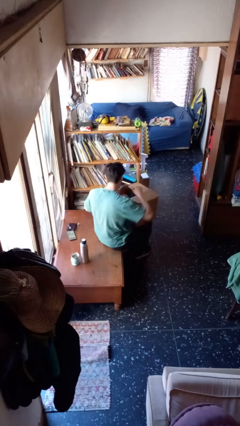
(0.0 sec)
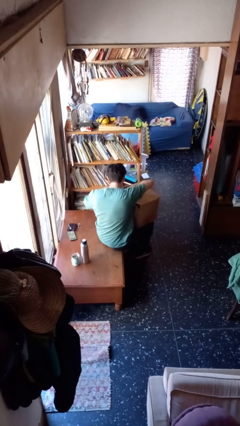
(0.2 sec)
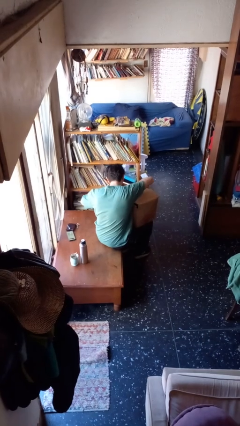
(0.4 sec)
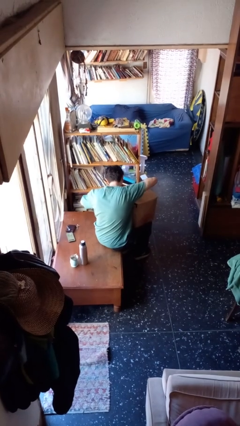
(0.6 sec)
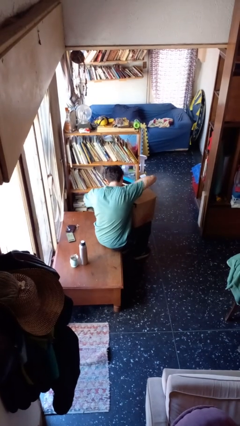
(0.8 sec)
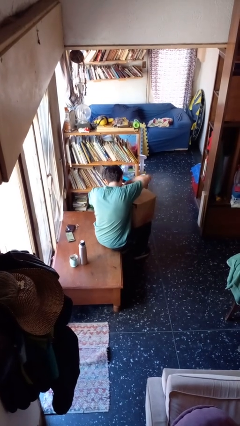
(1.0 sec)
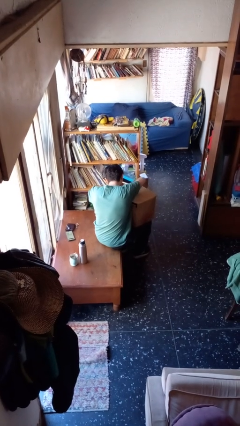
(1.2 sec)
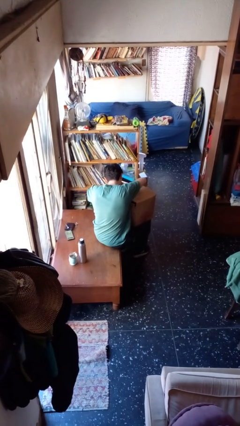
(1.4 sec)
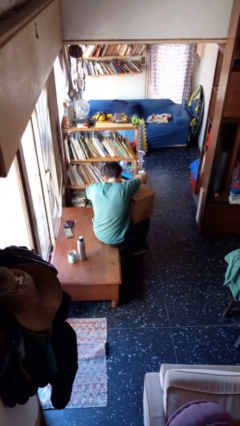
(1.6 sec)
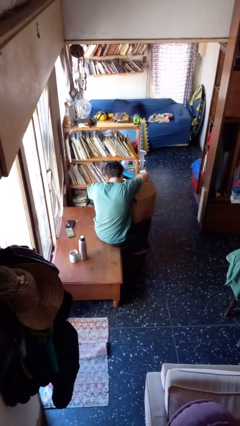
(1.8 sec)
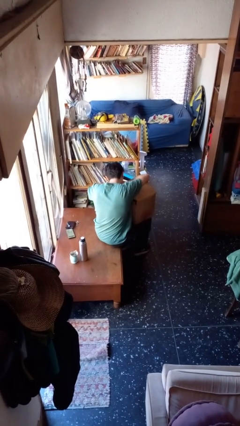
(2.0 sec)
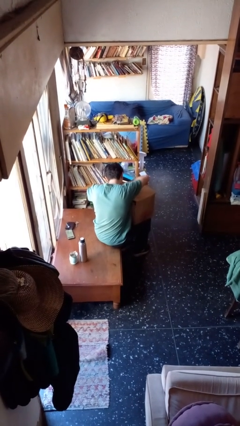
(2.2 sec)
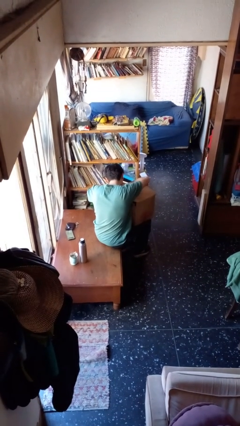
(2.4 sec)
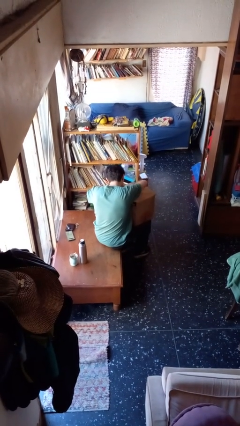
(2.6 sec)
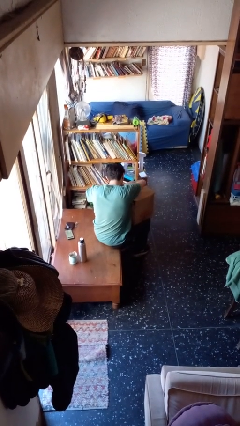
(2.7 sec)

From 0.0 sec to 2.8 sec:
person searches in box

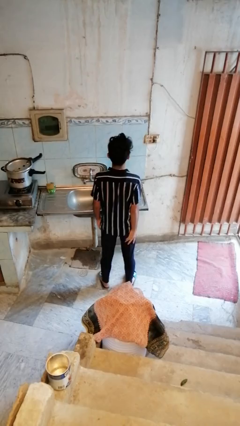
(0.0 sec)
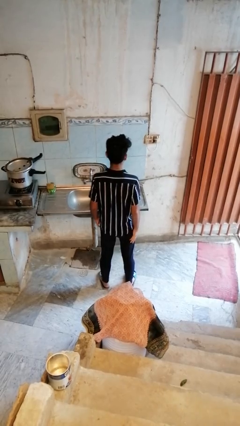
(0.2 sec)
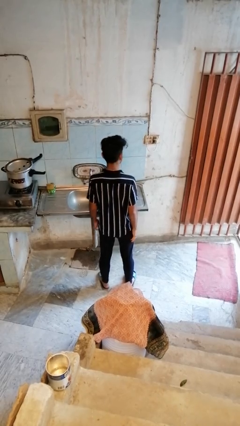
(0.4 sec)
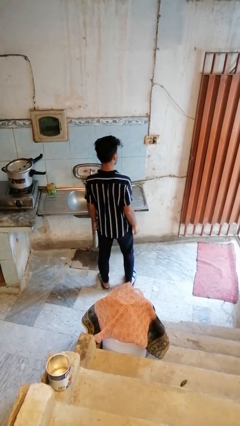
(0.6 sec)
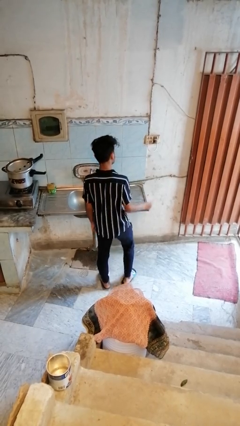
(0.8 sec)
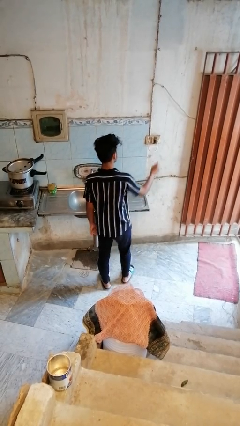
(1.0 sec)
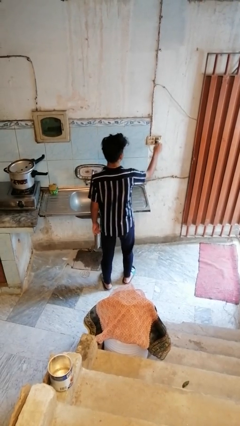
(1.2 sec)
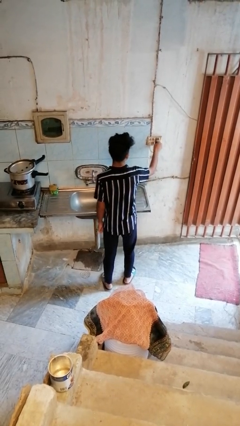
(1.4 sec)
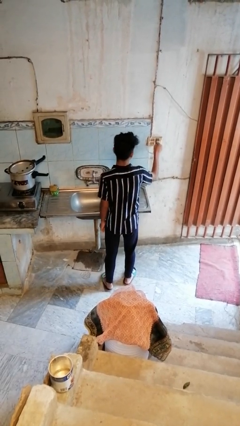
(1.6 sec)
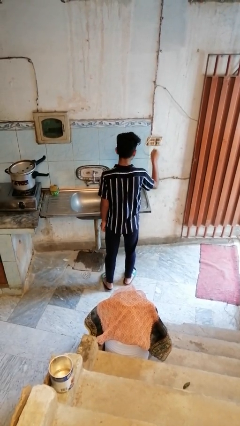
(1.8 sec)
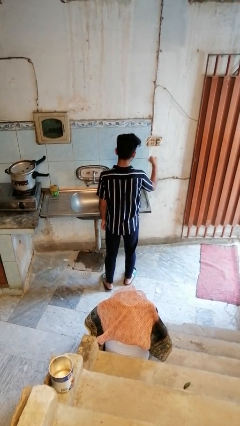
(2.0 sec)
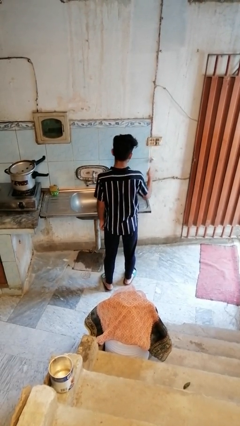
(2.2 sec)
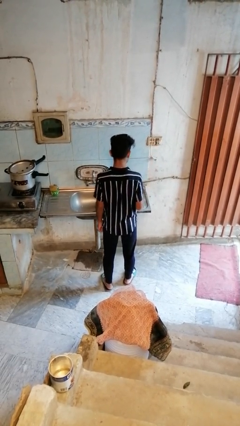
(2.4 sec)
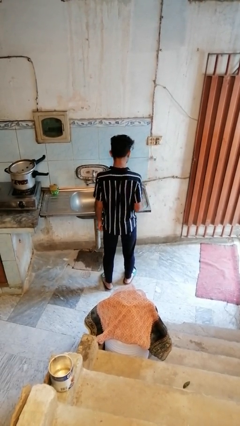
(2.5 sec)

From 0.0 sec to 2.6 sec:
person unplugs from electrical socket

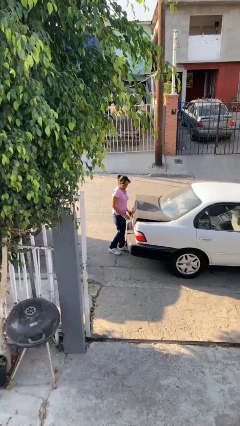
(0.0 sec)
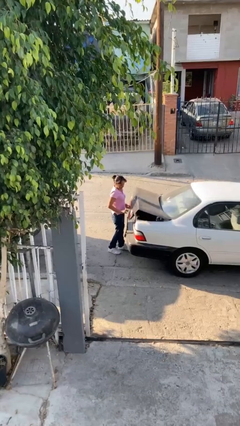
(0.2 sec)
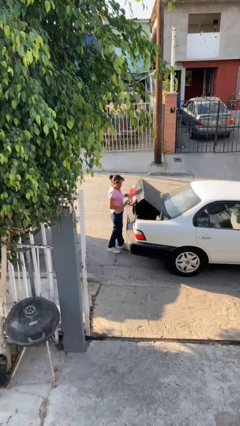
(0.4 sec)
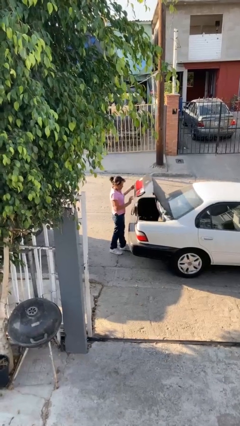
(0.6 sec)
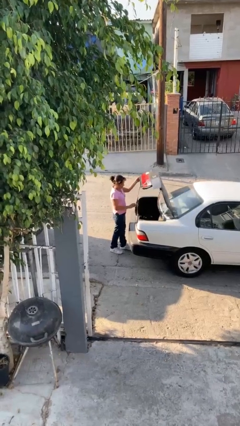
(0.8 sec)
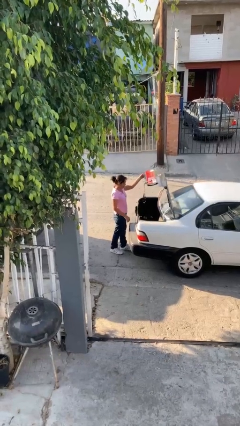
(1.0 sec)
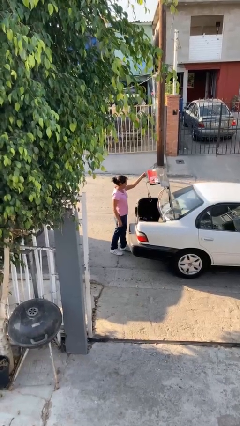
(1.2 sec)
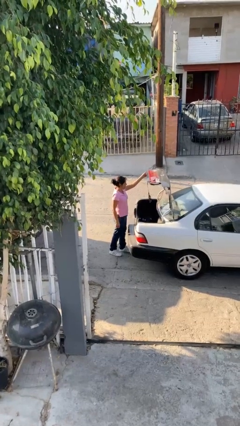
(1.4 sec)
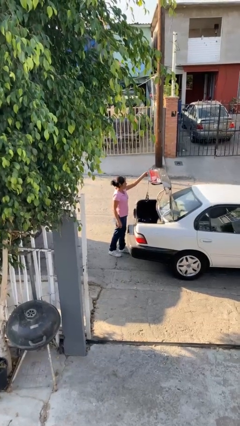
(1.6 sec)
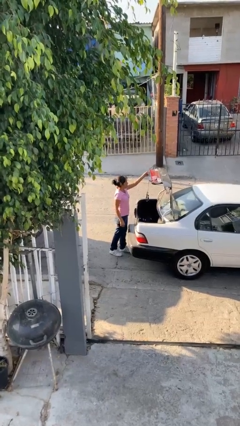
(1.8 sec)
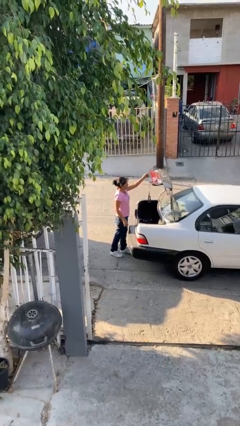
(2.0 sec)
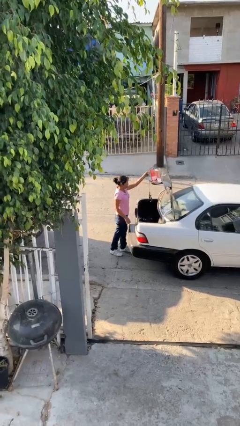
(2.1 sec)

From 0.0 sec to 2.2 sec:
person opens car trunk

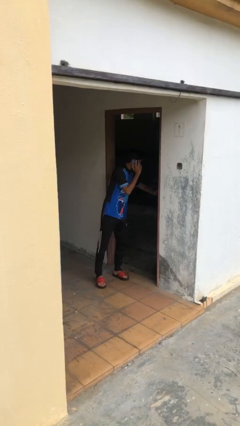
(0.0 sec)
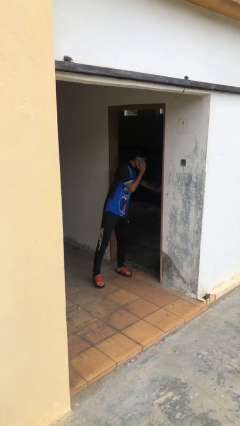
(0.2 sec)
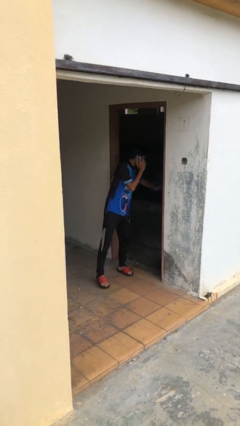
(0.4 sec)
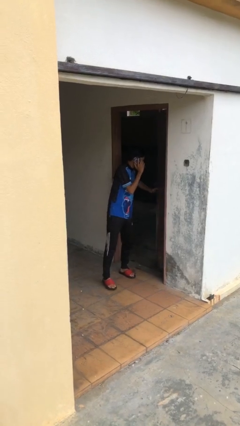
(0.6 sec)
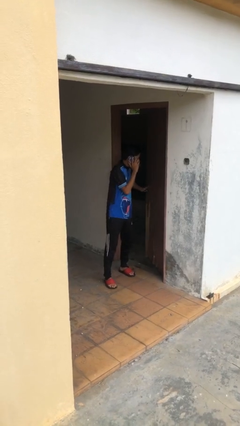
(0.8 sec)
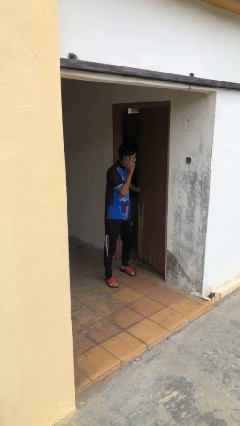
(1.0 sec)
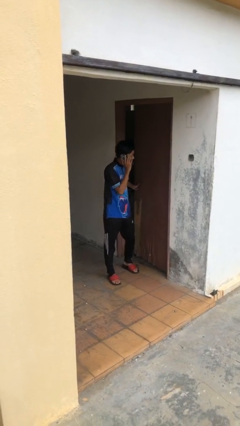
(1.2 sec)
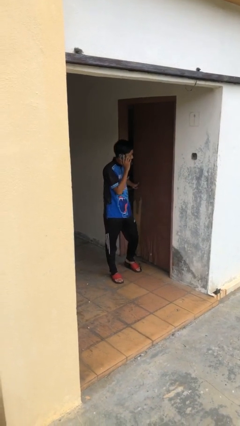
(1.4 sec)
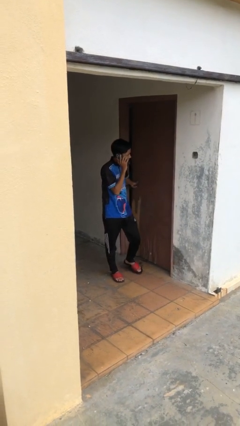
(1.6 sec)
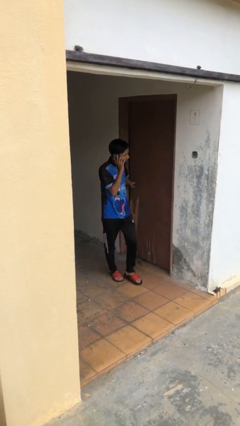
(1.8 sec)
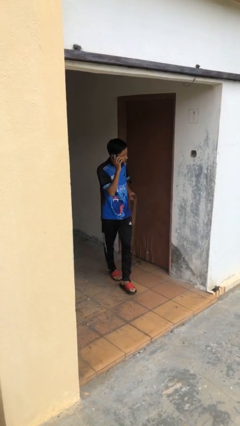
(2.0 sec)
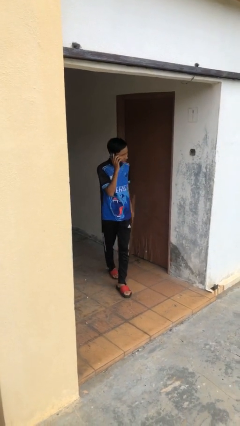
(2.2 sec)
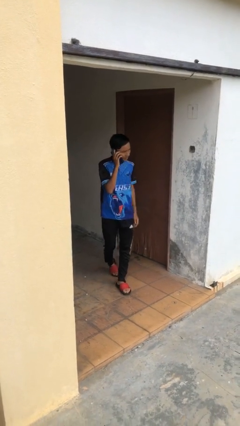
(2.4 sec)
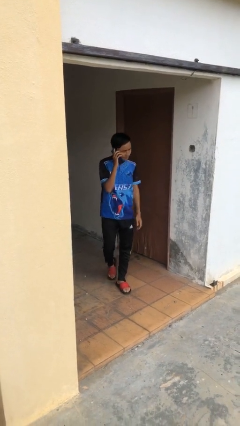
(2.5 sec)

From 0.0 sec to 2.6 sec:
person closes facility door

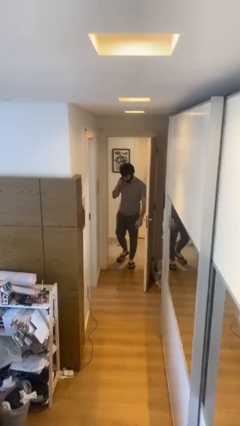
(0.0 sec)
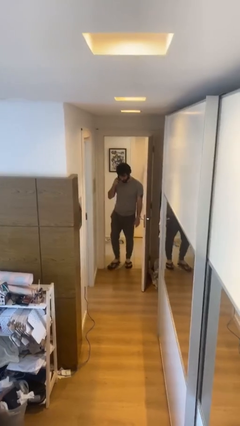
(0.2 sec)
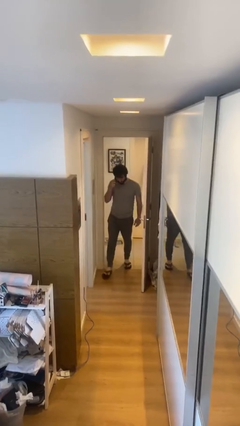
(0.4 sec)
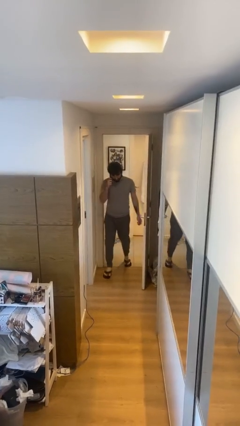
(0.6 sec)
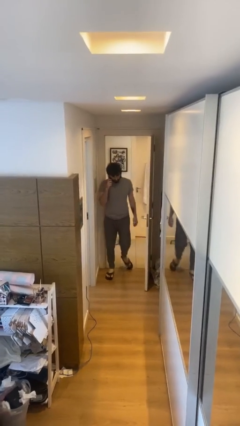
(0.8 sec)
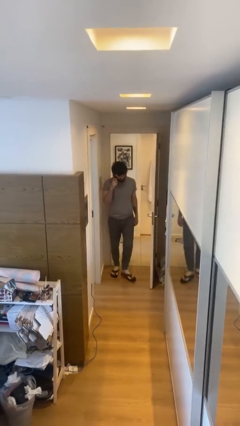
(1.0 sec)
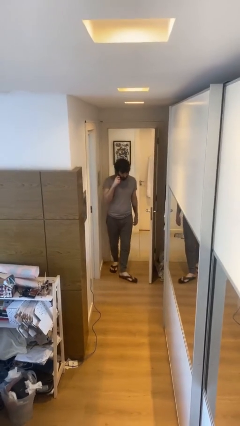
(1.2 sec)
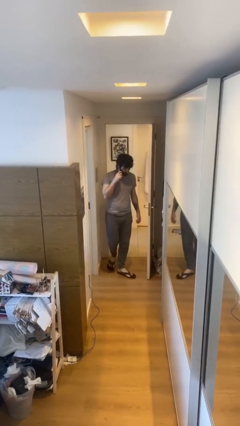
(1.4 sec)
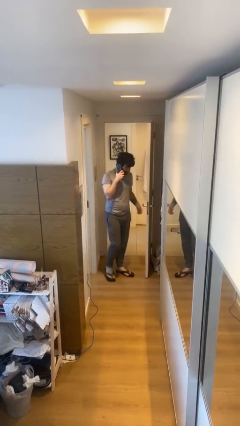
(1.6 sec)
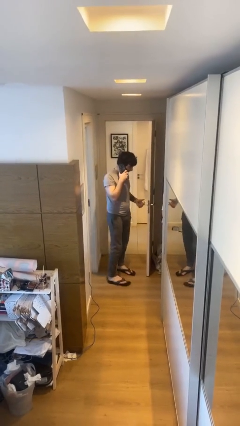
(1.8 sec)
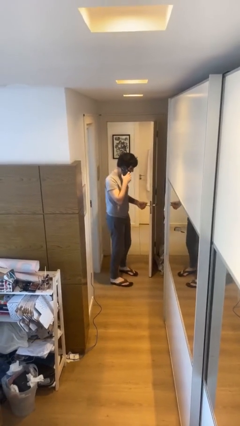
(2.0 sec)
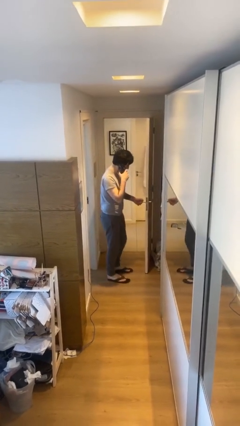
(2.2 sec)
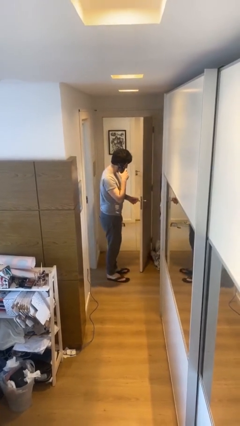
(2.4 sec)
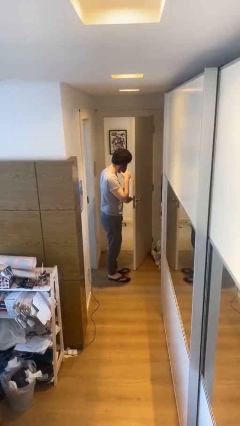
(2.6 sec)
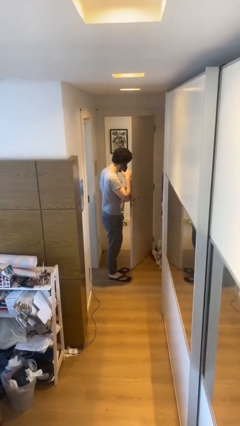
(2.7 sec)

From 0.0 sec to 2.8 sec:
person enters scene through structure

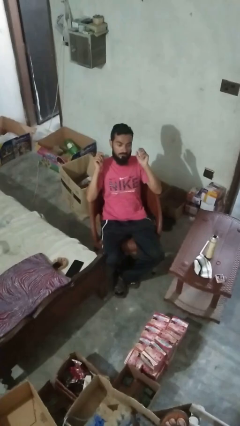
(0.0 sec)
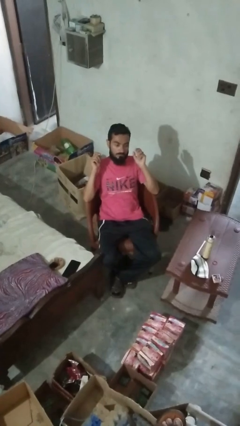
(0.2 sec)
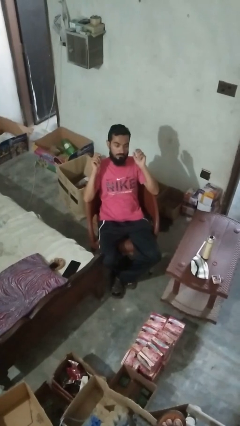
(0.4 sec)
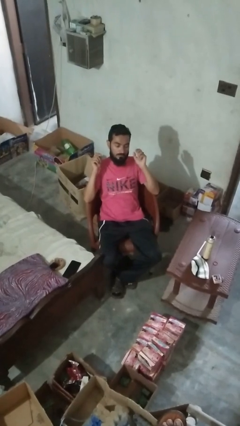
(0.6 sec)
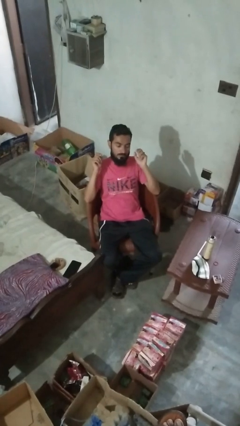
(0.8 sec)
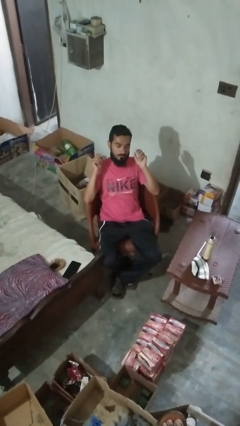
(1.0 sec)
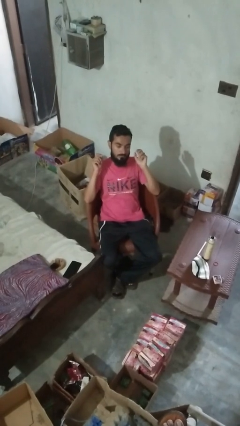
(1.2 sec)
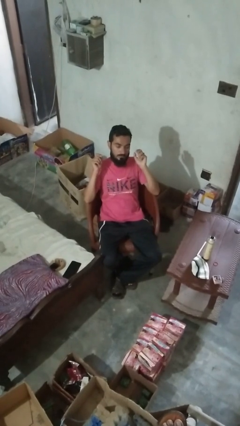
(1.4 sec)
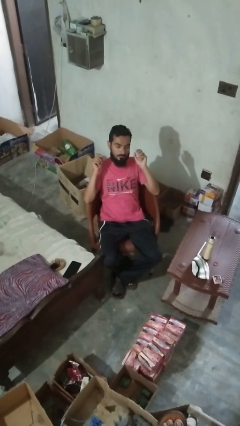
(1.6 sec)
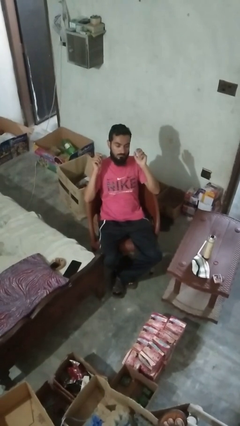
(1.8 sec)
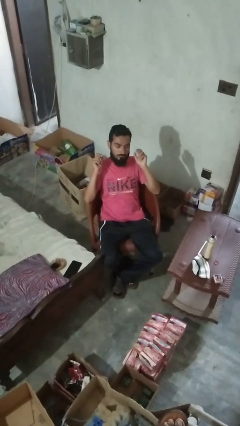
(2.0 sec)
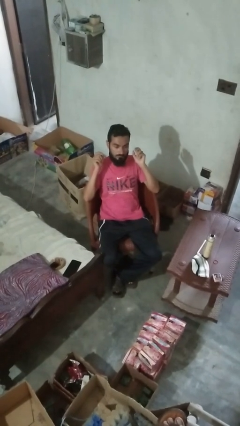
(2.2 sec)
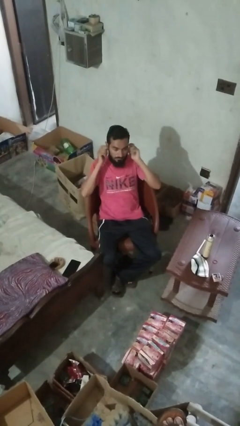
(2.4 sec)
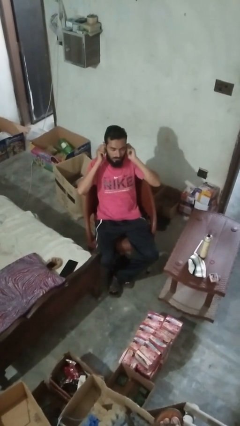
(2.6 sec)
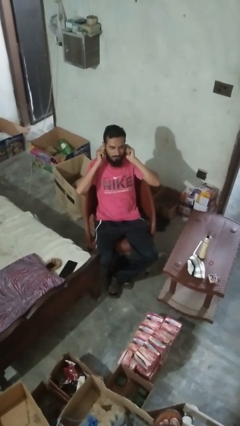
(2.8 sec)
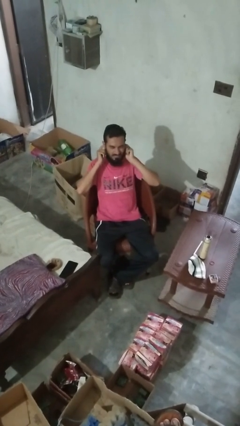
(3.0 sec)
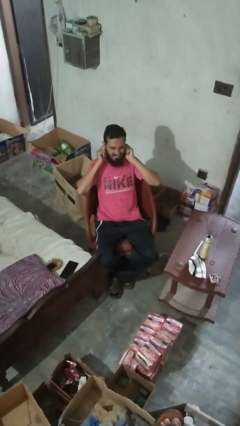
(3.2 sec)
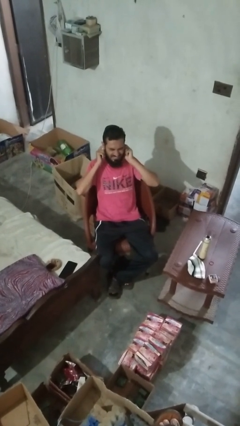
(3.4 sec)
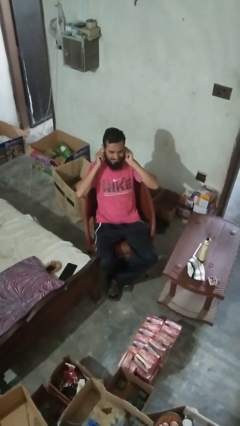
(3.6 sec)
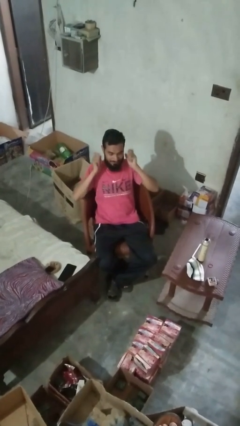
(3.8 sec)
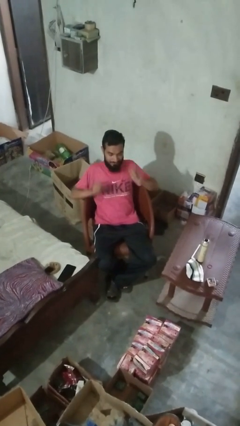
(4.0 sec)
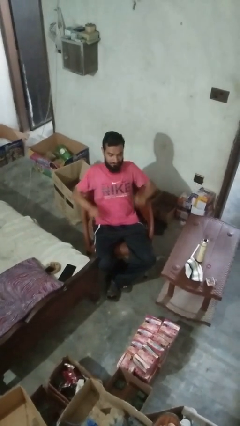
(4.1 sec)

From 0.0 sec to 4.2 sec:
person puts fingers in ear
